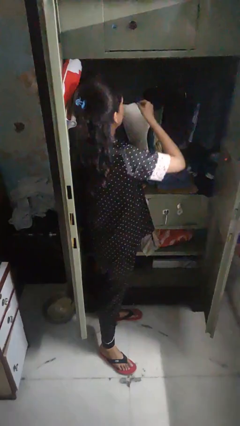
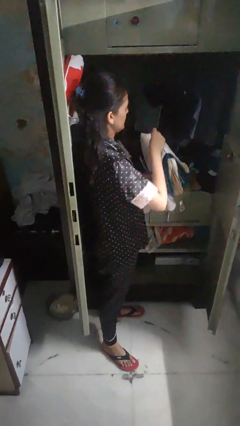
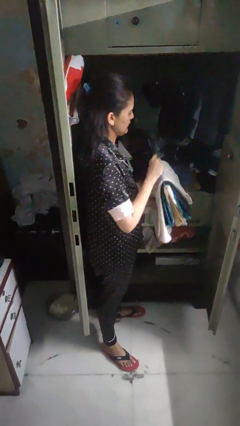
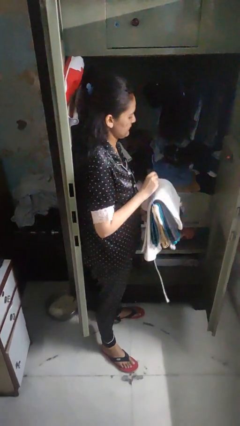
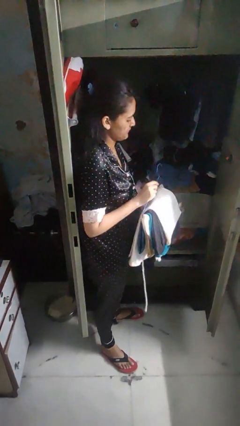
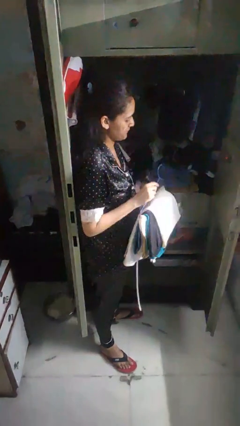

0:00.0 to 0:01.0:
person takes clothes from closet

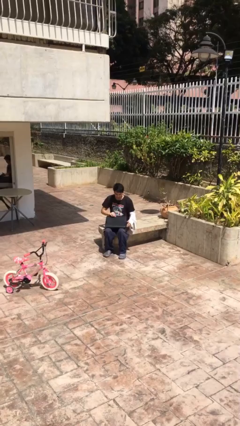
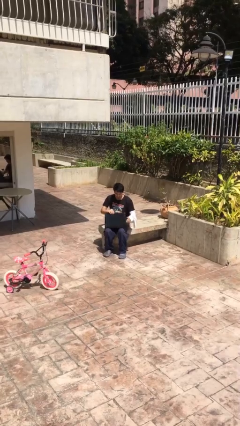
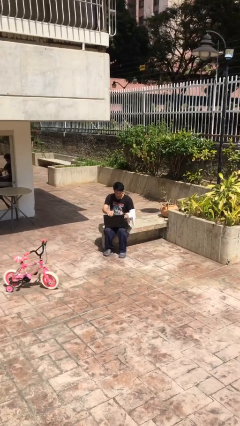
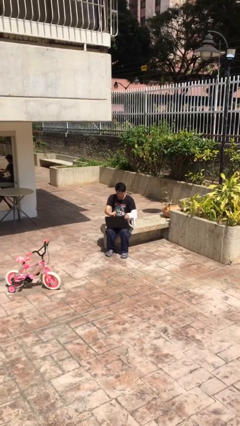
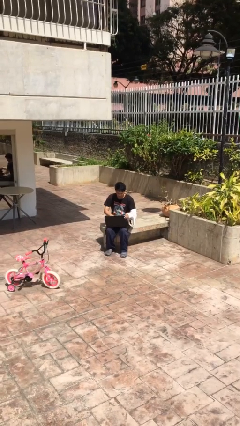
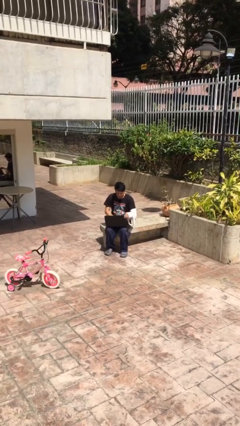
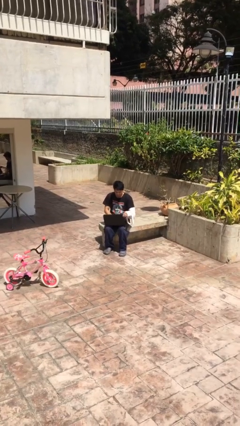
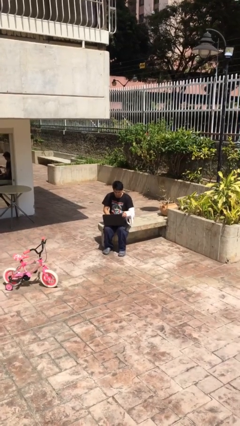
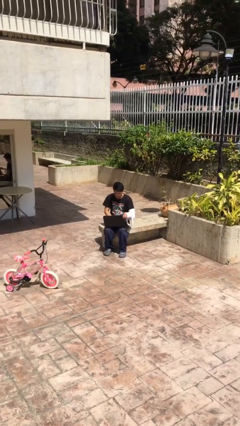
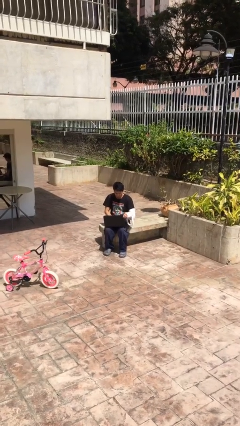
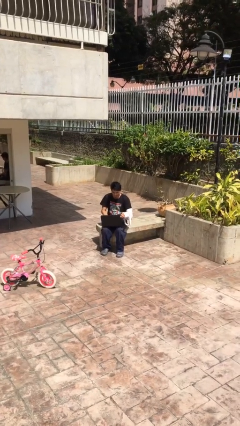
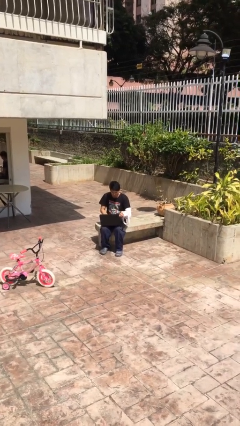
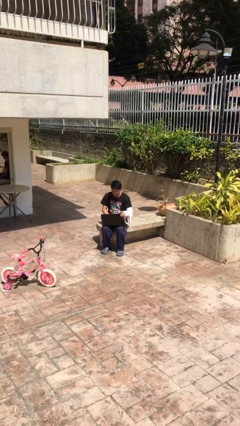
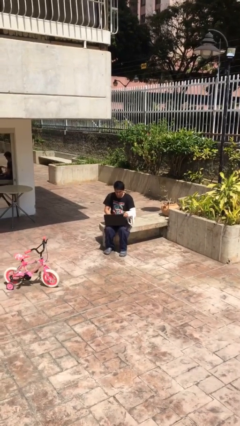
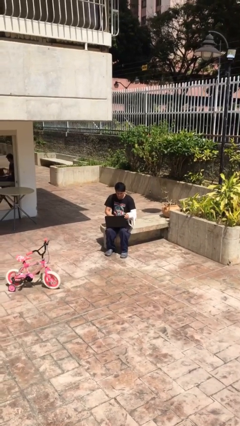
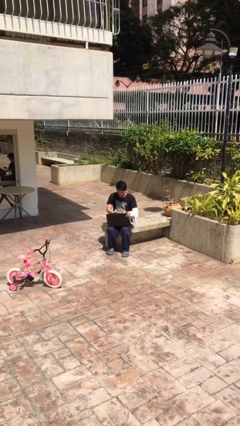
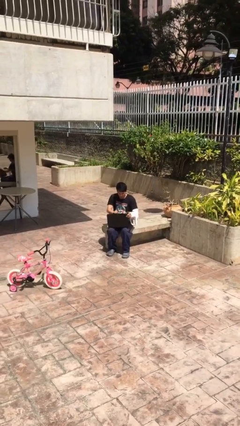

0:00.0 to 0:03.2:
person interacts with laptop

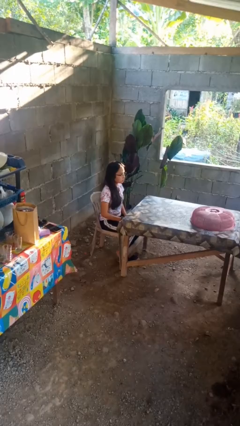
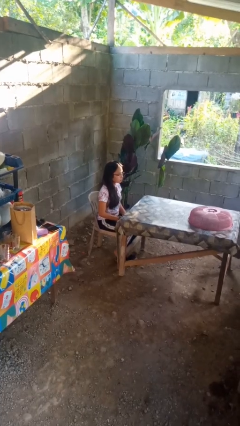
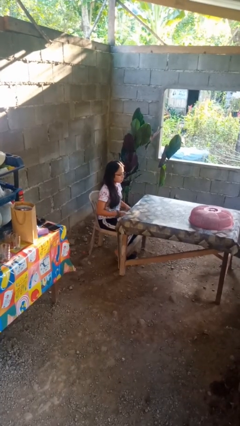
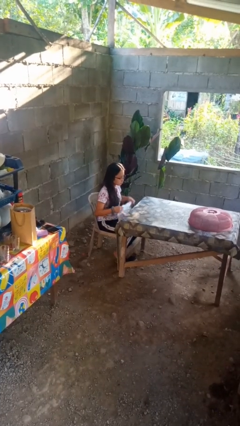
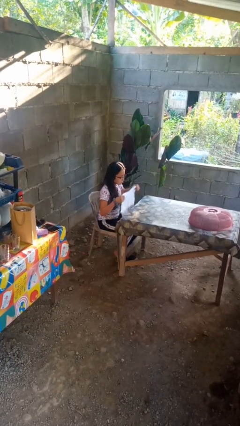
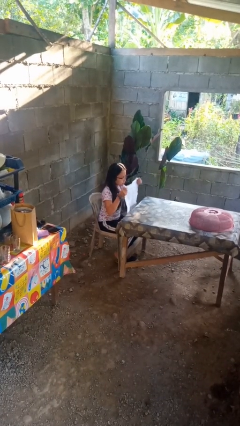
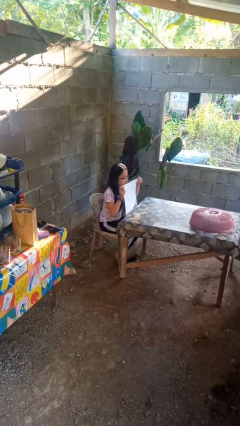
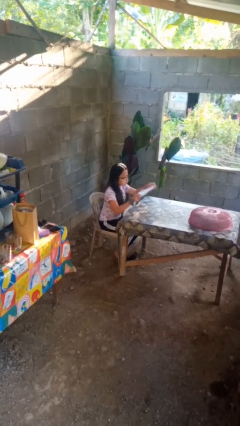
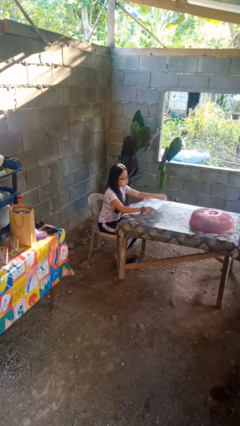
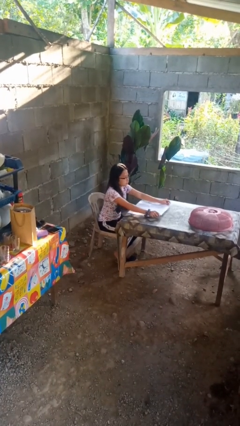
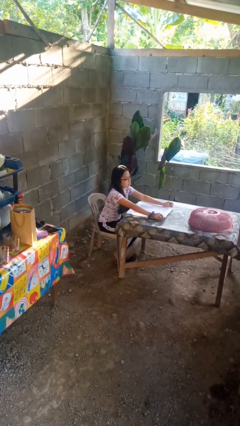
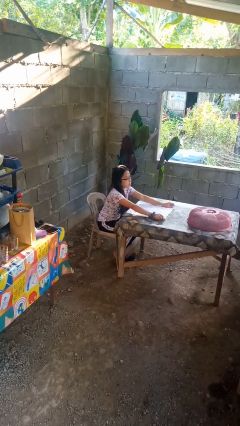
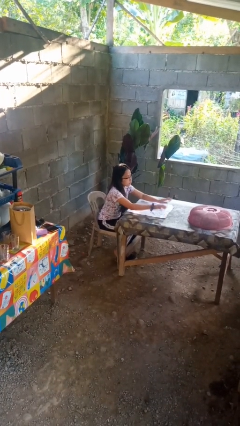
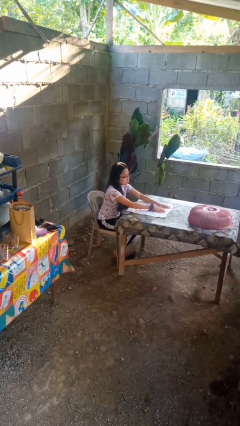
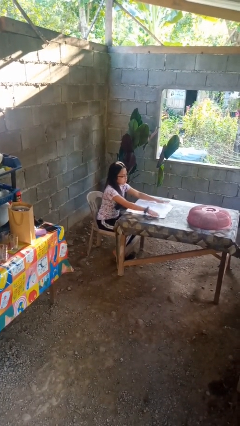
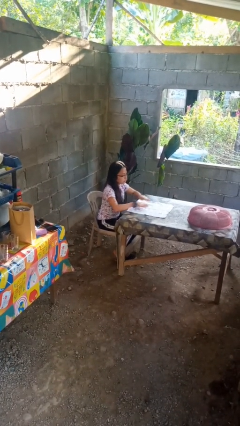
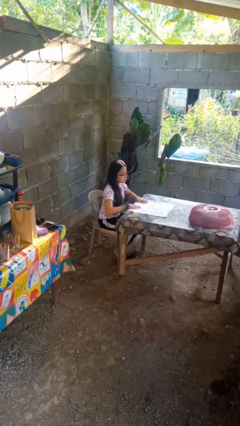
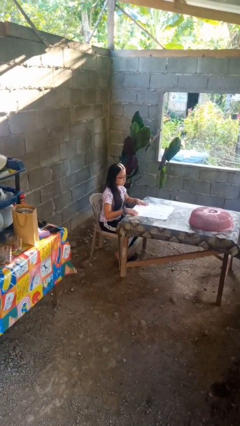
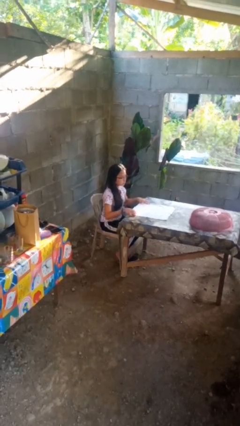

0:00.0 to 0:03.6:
person spreads tablecloth

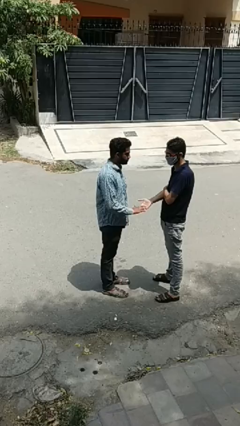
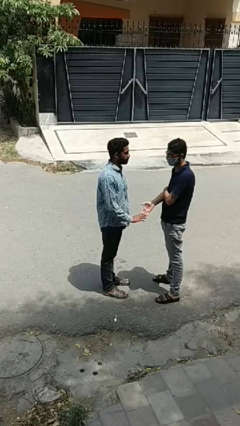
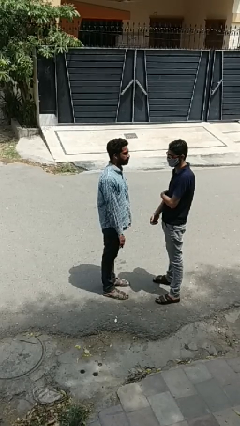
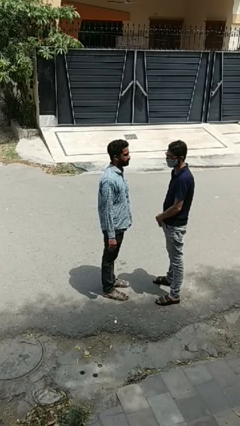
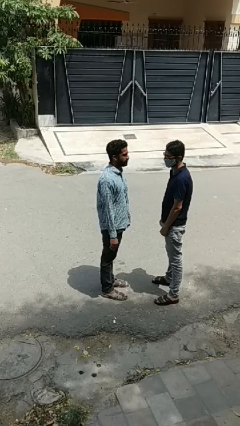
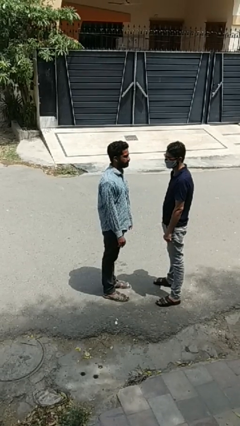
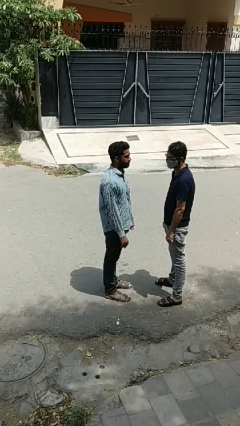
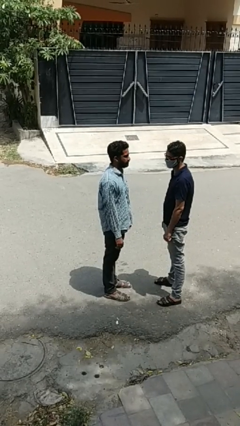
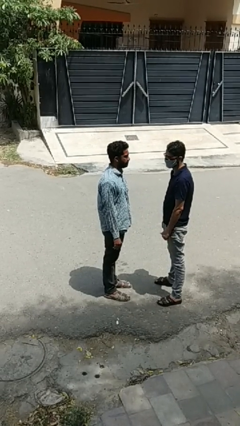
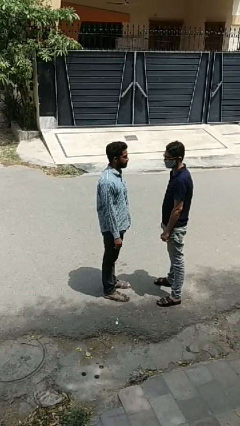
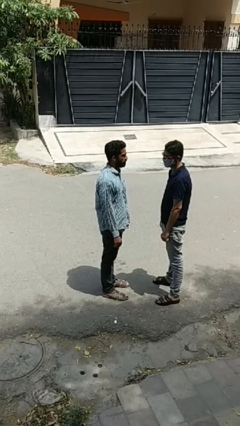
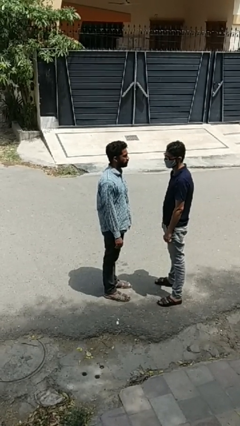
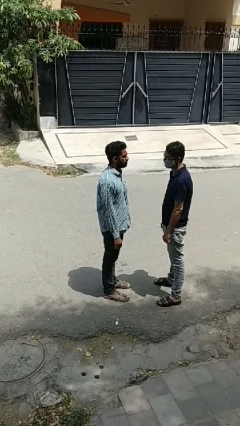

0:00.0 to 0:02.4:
person highfives hand

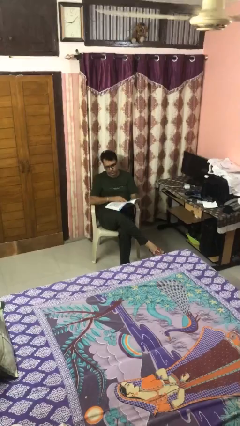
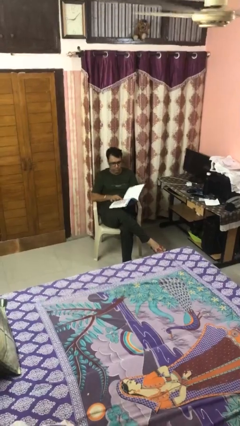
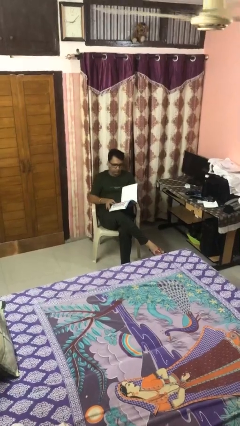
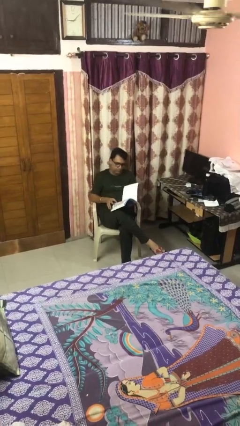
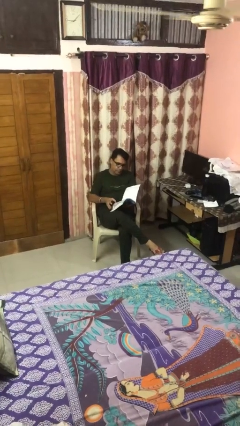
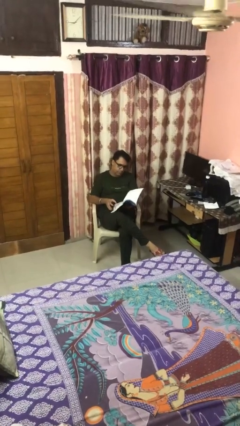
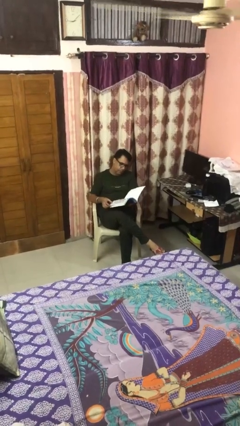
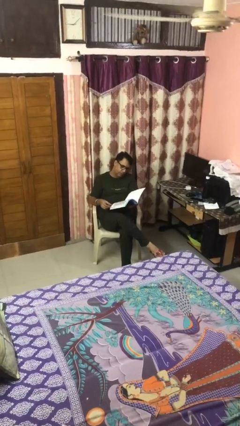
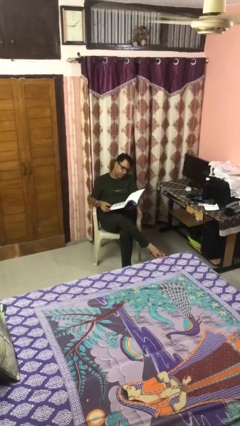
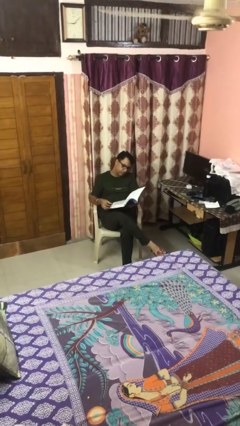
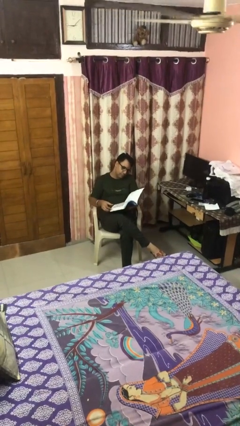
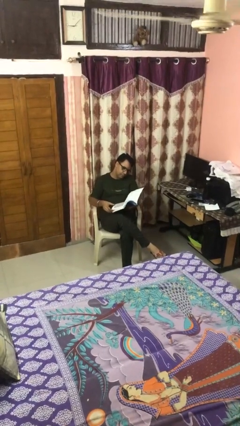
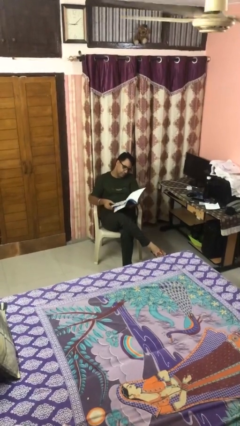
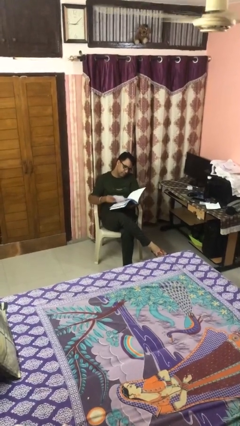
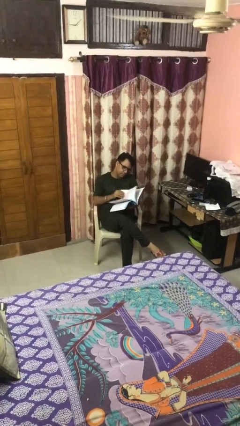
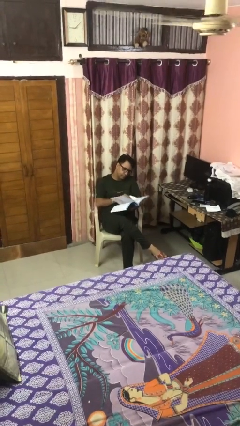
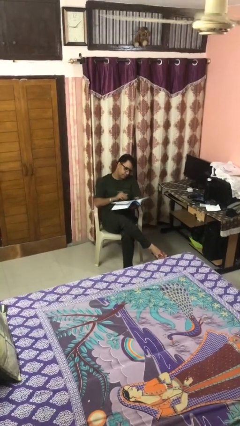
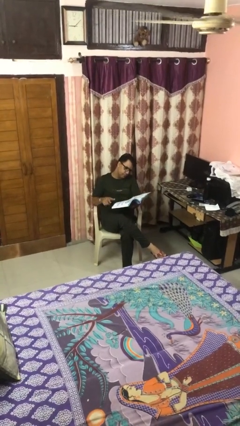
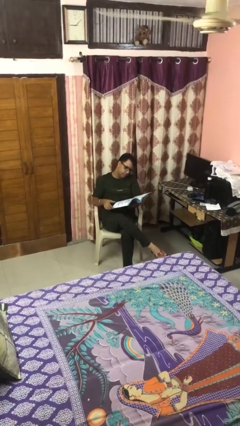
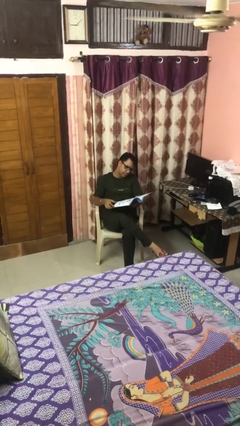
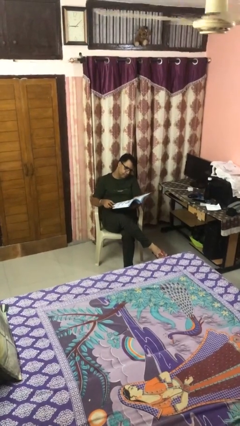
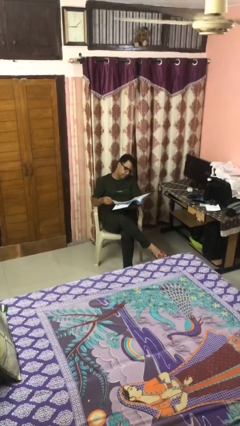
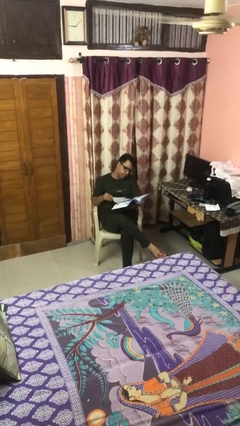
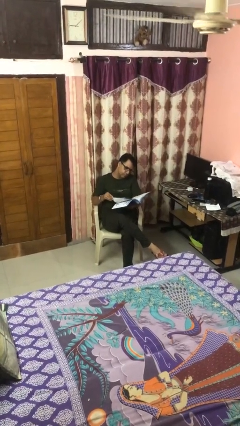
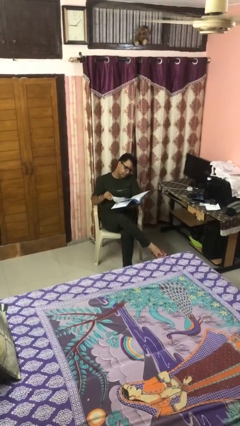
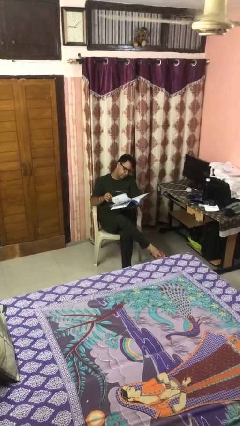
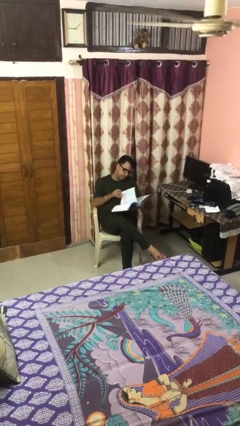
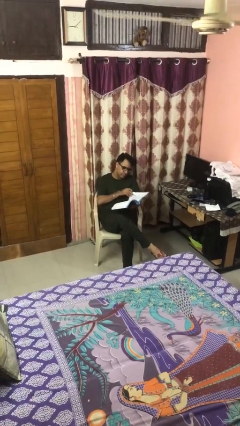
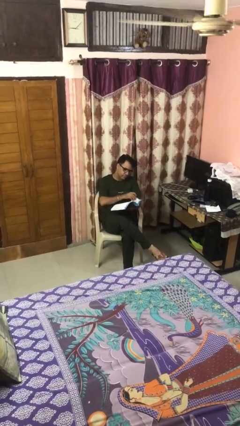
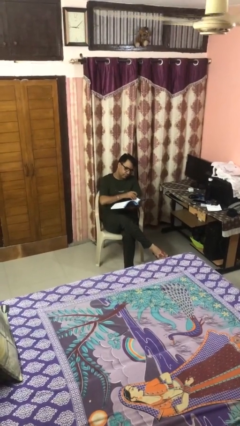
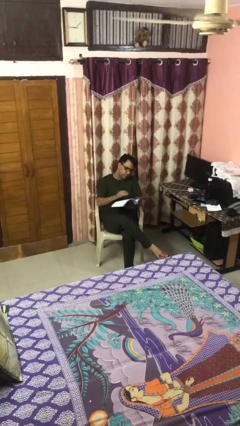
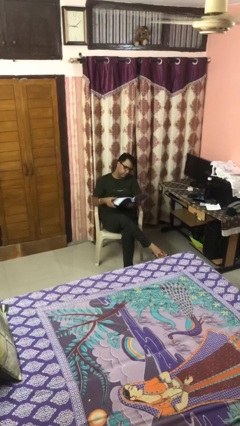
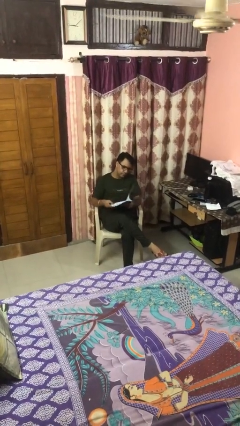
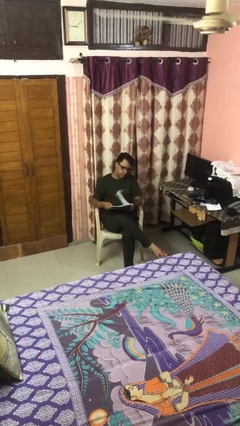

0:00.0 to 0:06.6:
person reads book

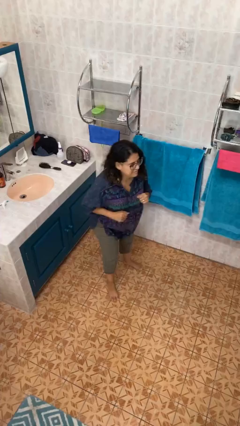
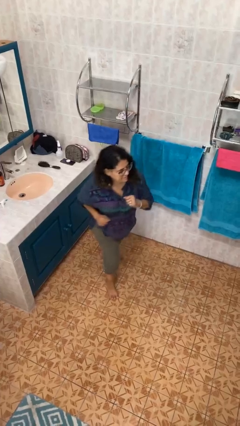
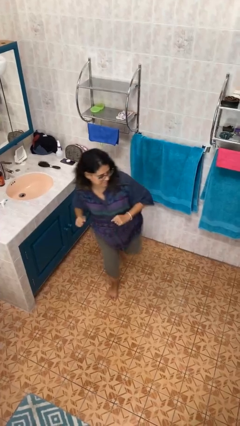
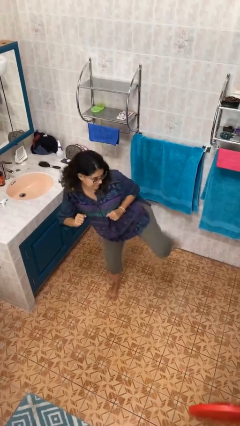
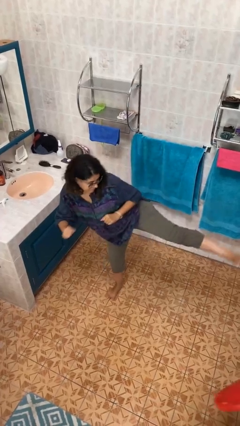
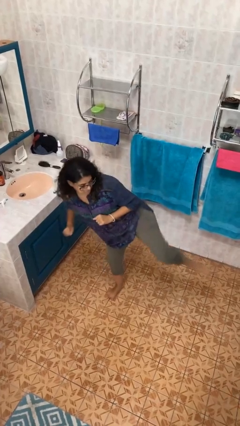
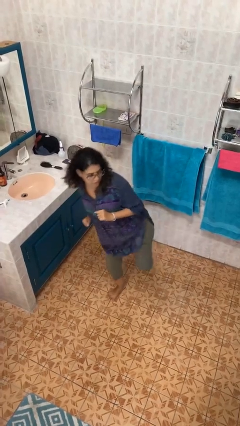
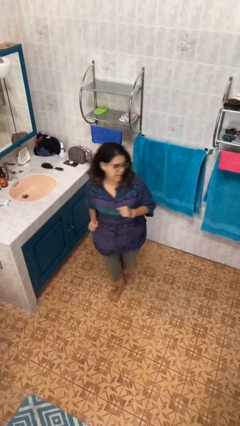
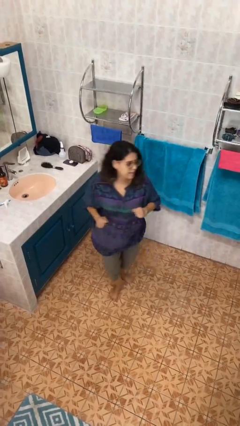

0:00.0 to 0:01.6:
person karate kicks
